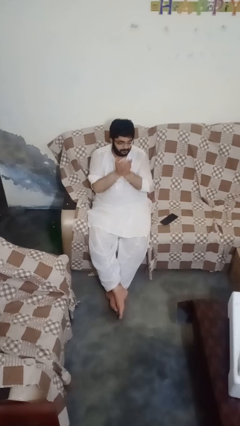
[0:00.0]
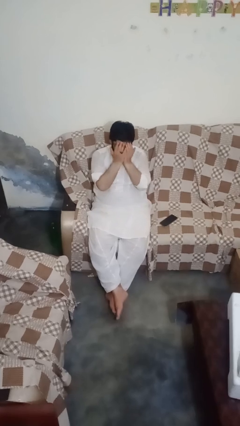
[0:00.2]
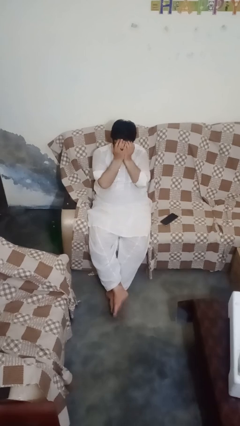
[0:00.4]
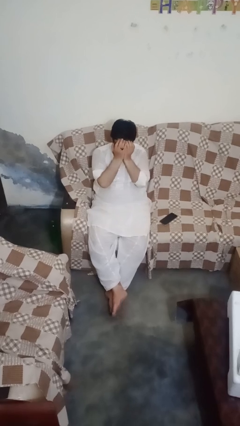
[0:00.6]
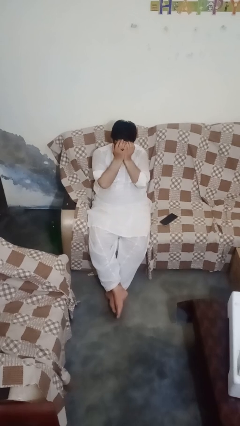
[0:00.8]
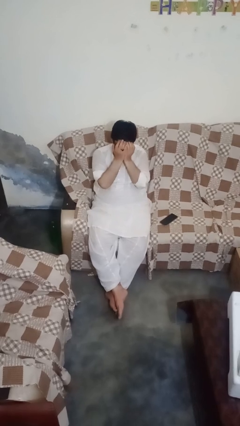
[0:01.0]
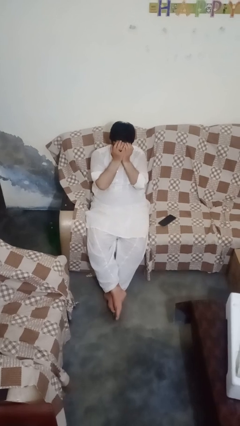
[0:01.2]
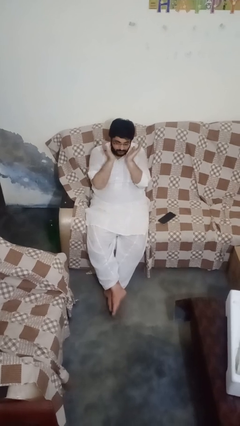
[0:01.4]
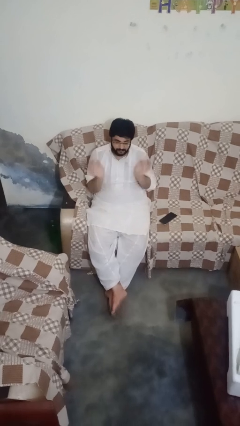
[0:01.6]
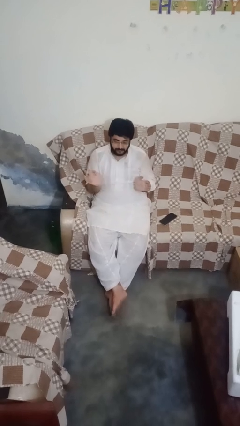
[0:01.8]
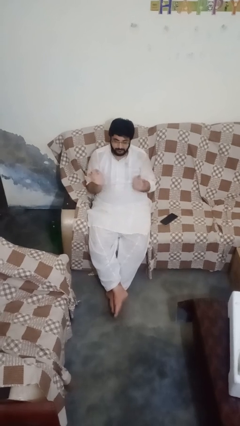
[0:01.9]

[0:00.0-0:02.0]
person covers face with hands

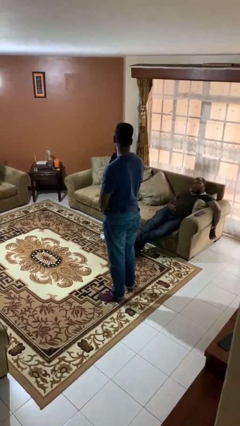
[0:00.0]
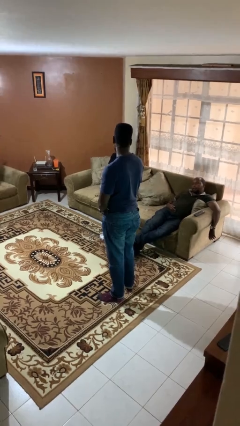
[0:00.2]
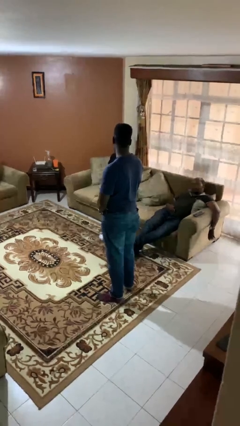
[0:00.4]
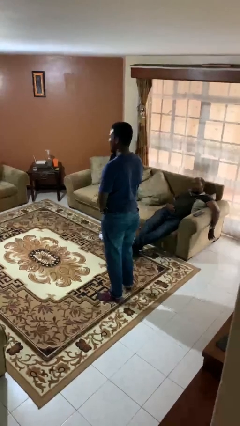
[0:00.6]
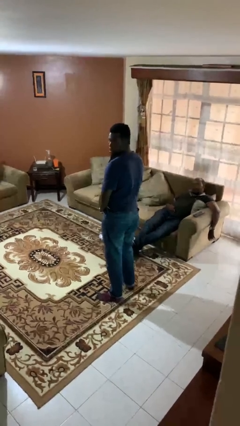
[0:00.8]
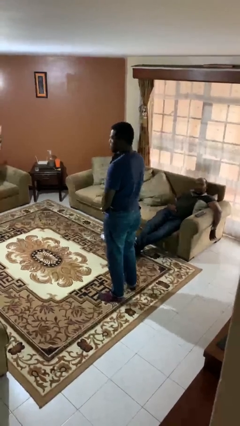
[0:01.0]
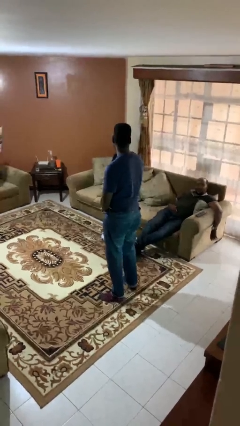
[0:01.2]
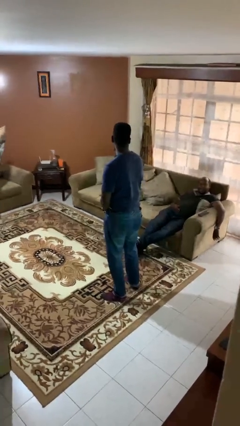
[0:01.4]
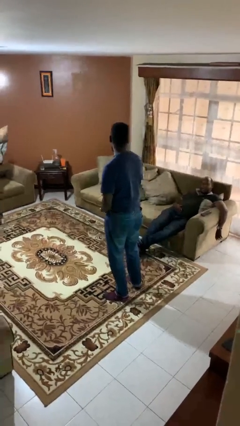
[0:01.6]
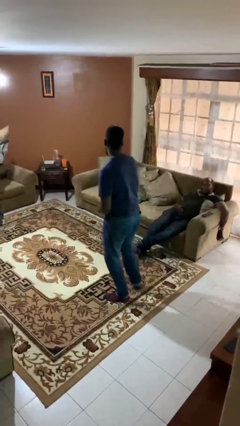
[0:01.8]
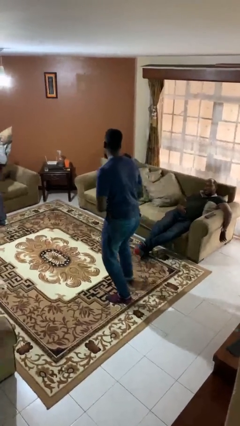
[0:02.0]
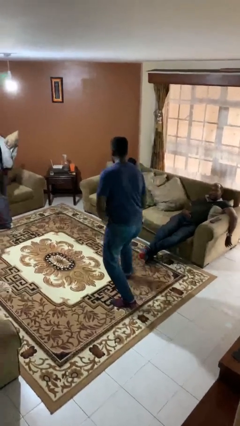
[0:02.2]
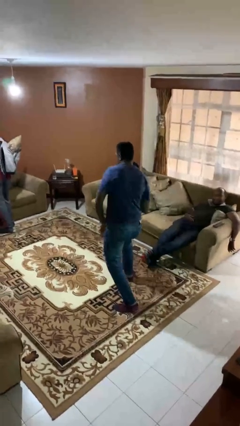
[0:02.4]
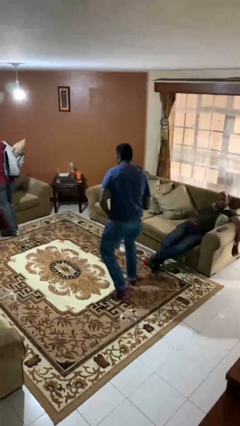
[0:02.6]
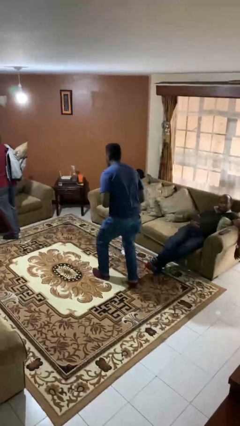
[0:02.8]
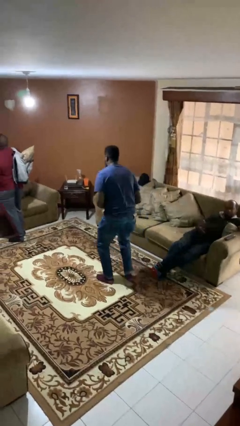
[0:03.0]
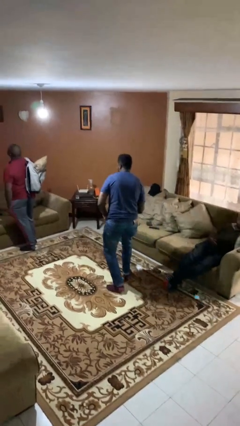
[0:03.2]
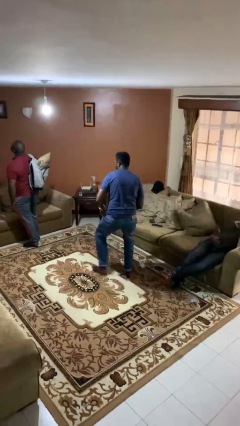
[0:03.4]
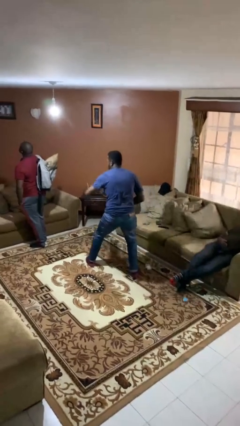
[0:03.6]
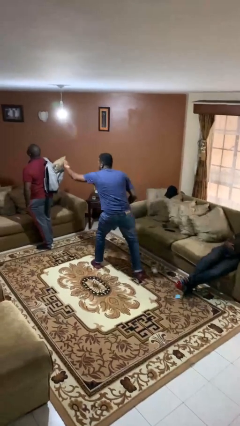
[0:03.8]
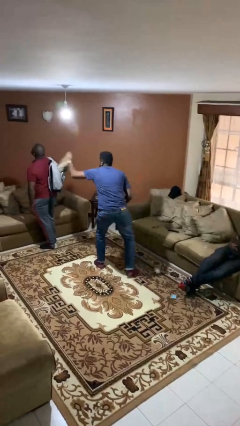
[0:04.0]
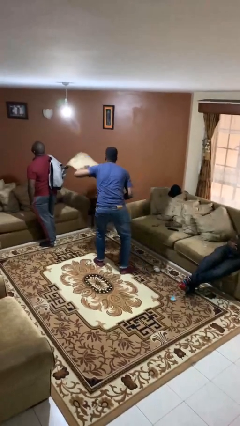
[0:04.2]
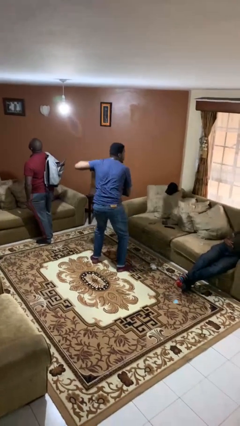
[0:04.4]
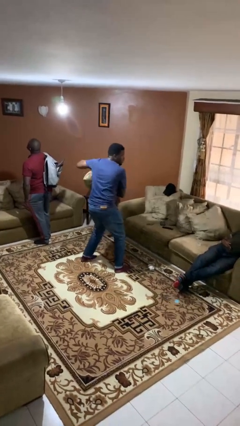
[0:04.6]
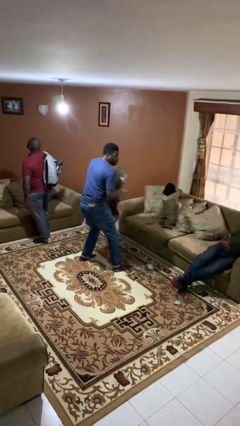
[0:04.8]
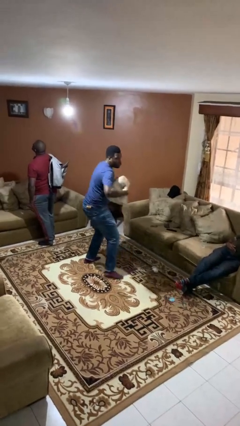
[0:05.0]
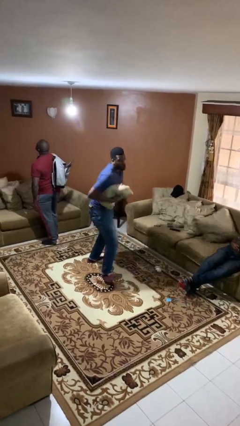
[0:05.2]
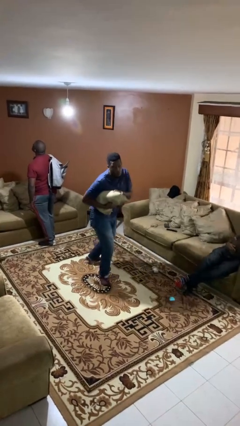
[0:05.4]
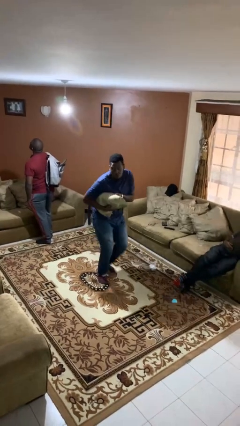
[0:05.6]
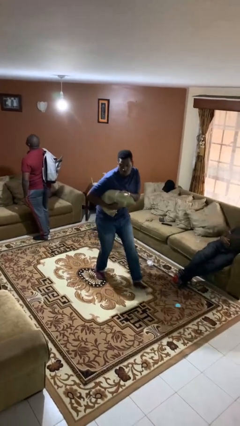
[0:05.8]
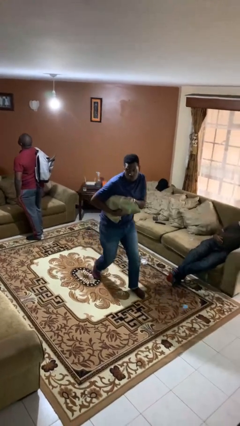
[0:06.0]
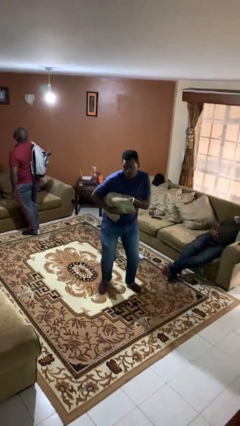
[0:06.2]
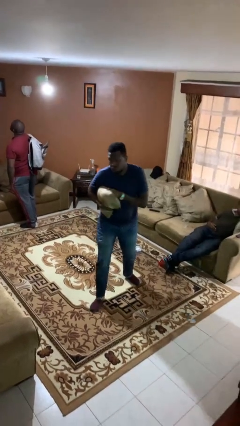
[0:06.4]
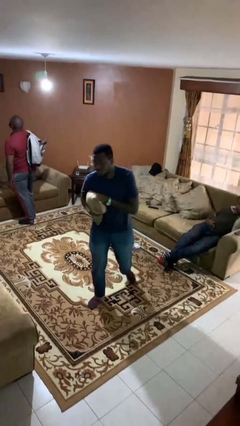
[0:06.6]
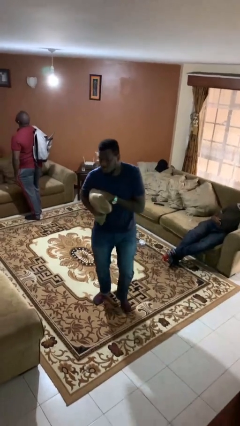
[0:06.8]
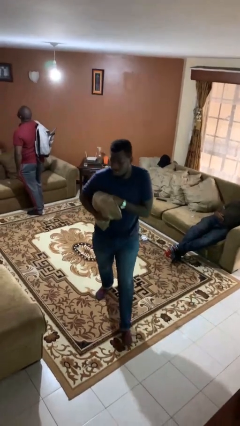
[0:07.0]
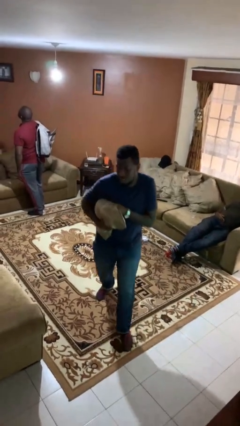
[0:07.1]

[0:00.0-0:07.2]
person steals object from person

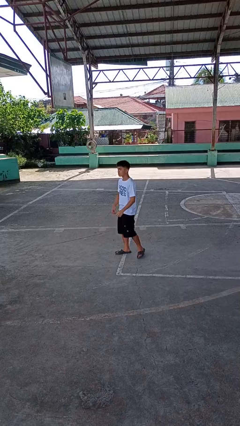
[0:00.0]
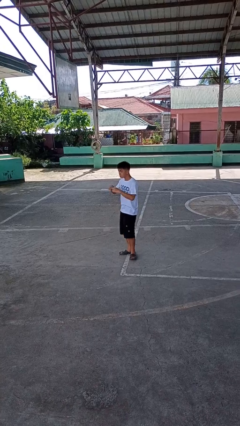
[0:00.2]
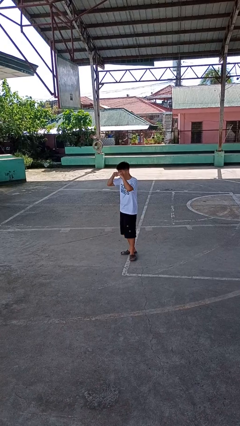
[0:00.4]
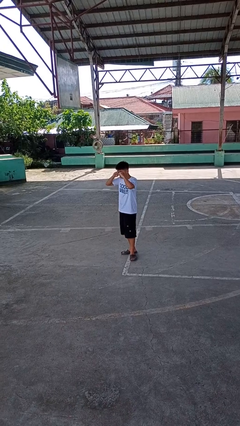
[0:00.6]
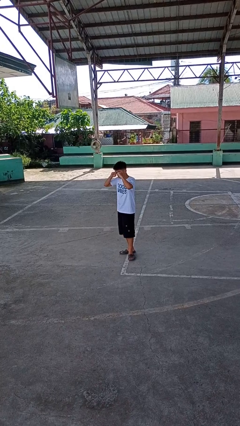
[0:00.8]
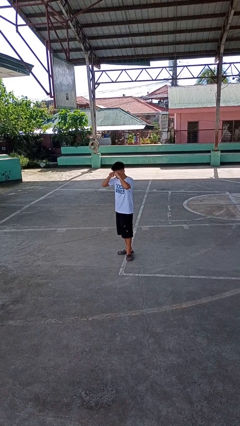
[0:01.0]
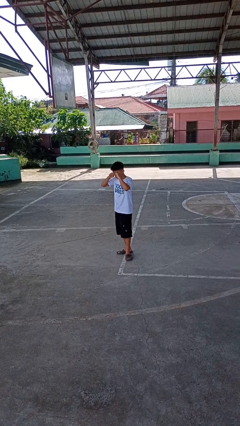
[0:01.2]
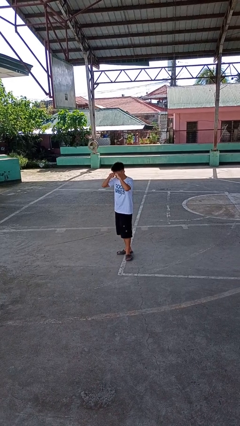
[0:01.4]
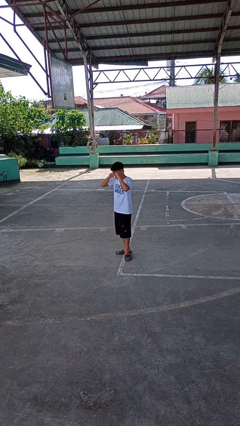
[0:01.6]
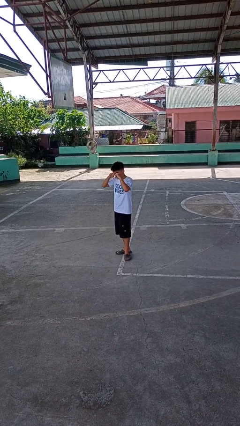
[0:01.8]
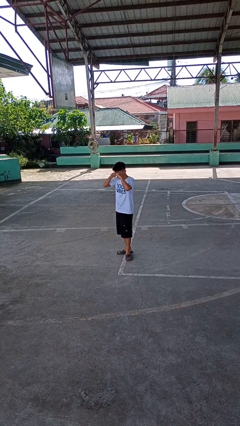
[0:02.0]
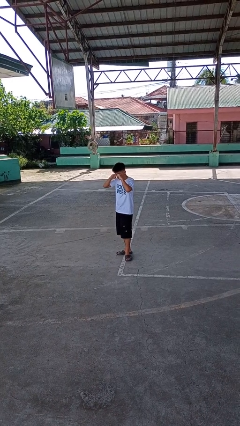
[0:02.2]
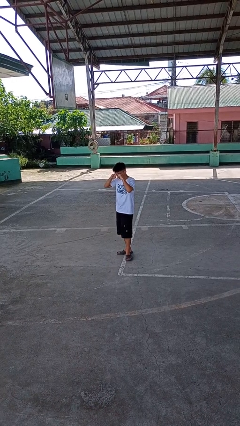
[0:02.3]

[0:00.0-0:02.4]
person rubs eyes

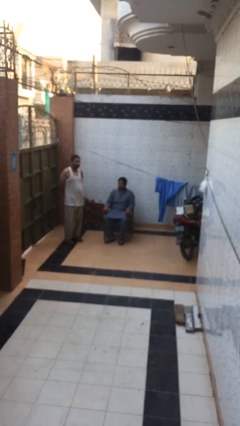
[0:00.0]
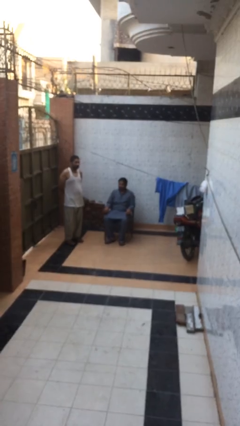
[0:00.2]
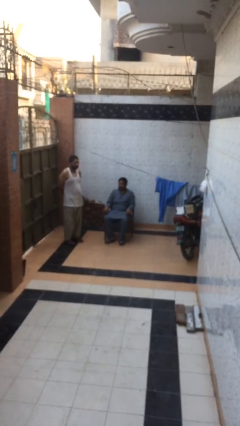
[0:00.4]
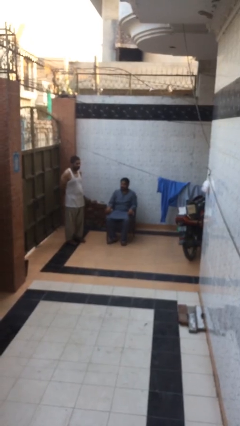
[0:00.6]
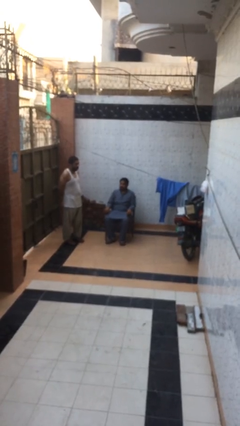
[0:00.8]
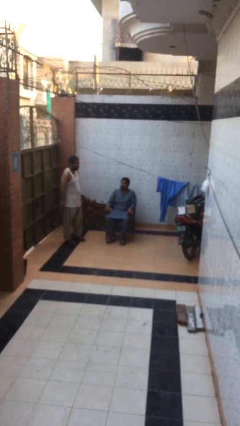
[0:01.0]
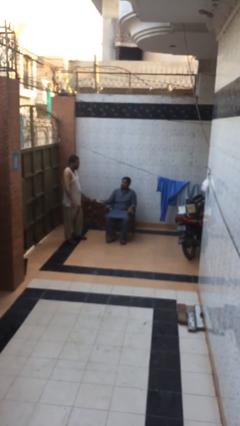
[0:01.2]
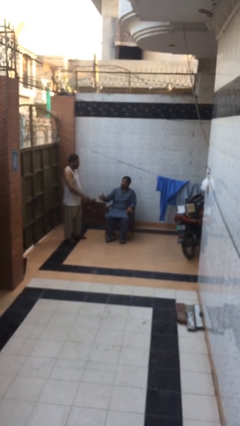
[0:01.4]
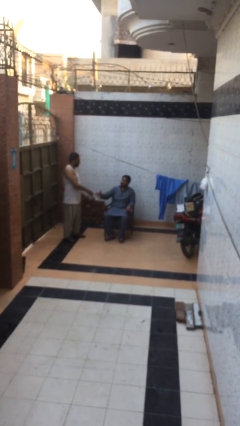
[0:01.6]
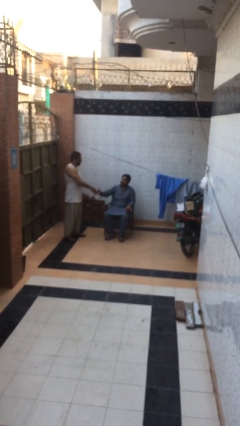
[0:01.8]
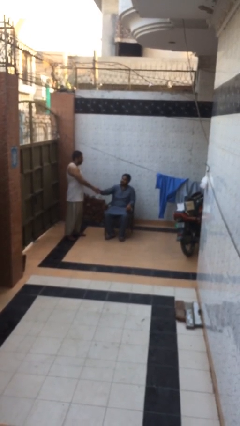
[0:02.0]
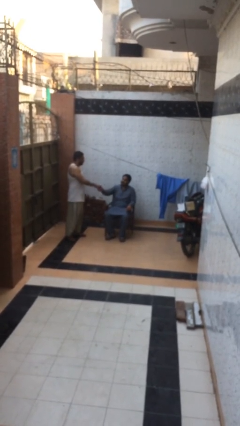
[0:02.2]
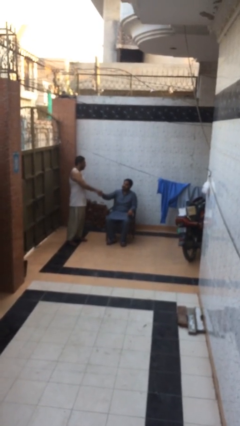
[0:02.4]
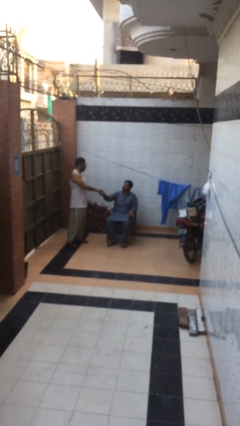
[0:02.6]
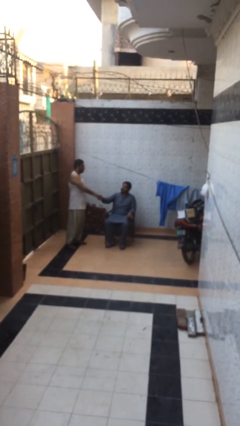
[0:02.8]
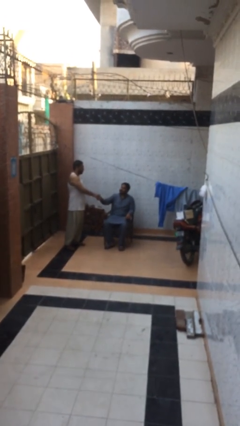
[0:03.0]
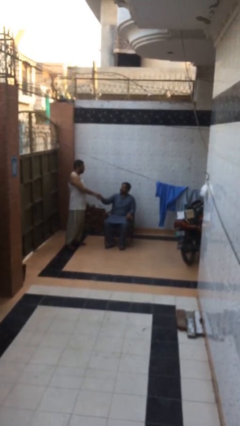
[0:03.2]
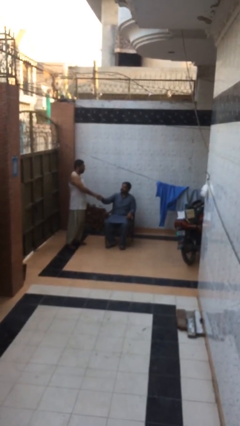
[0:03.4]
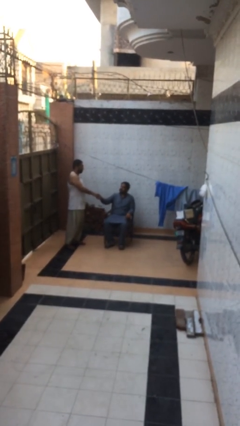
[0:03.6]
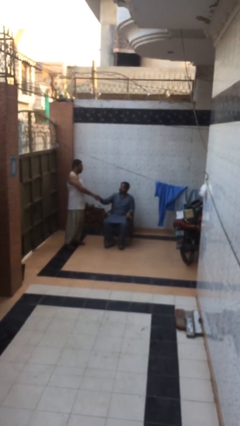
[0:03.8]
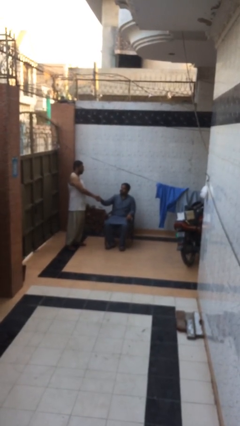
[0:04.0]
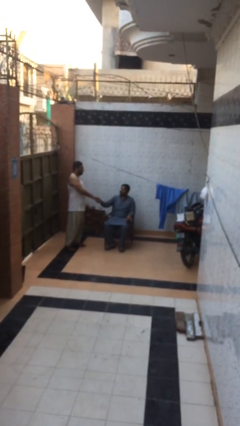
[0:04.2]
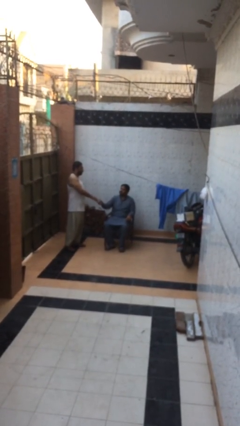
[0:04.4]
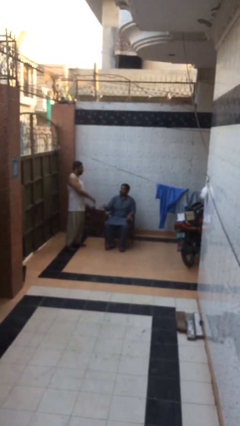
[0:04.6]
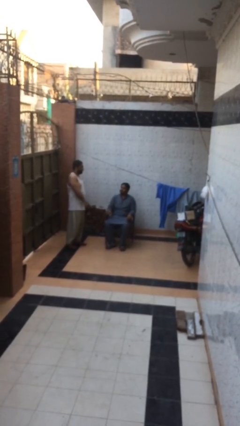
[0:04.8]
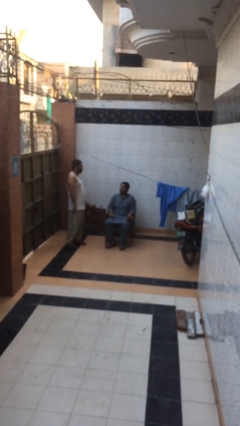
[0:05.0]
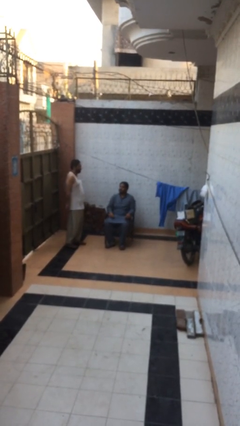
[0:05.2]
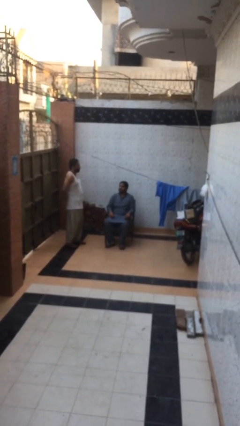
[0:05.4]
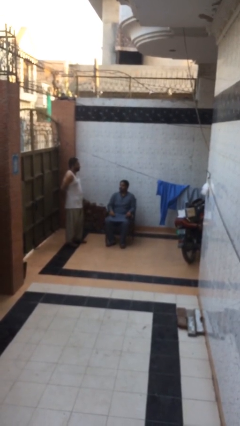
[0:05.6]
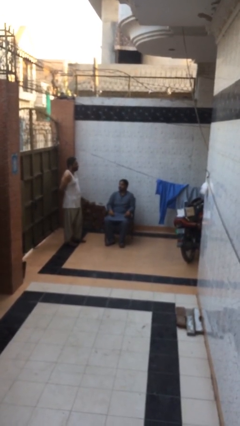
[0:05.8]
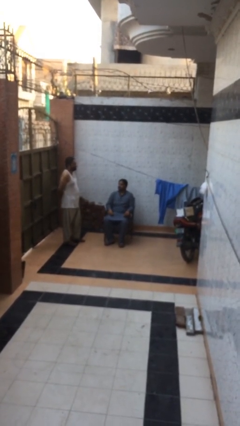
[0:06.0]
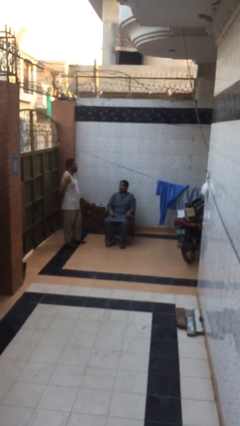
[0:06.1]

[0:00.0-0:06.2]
person shakes hand
